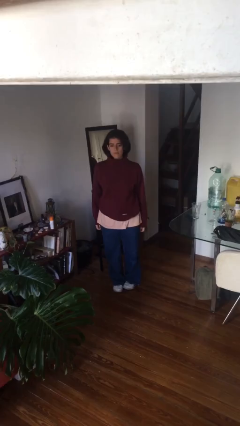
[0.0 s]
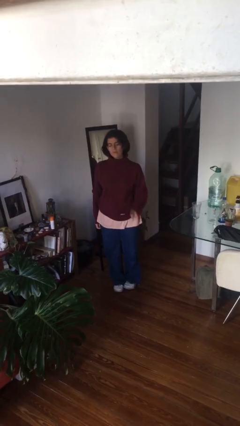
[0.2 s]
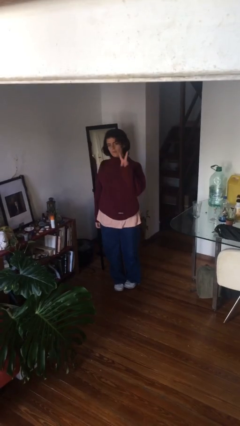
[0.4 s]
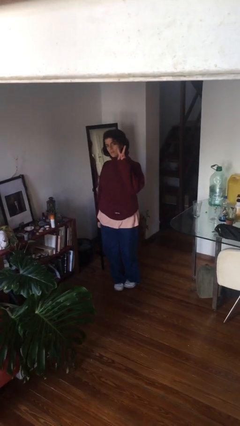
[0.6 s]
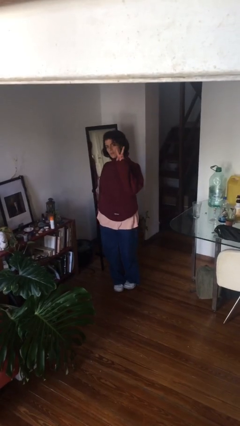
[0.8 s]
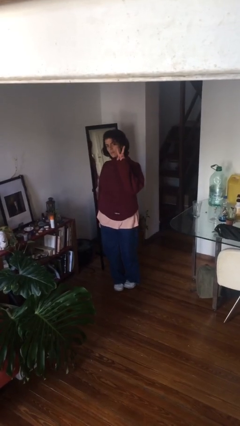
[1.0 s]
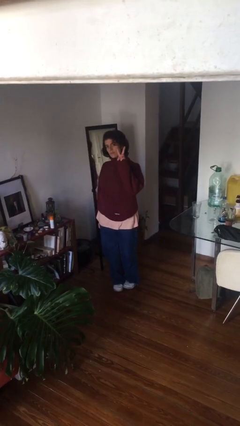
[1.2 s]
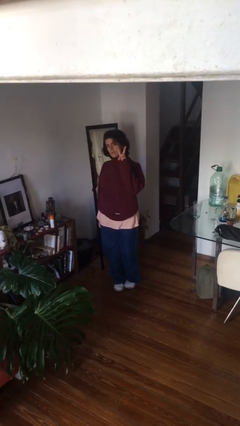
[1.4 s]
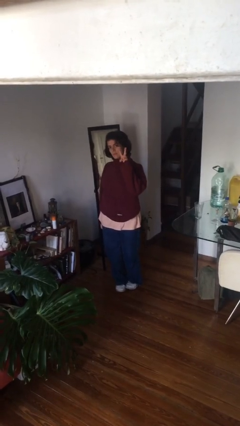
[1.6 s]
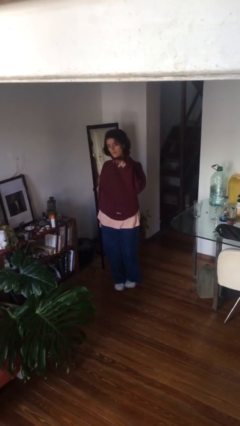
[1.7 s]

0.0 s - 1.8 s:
person gestures peace

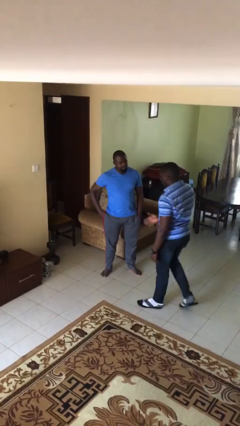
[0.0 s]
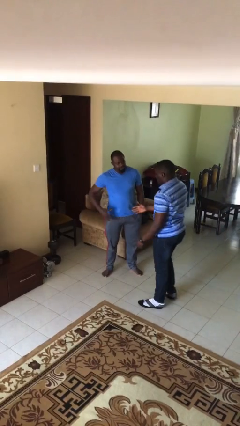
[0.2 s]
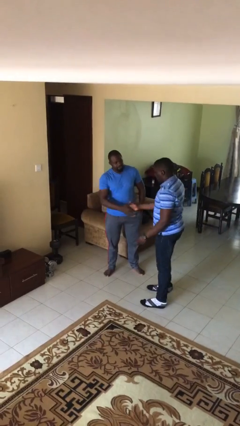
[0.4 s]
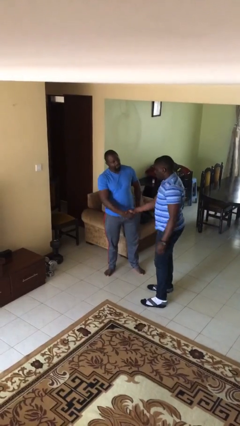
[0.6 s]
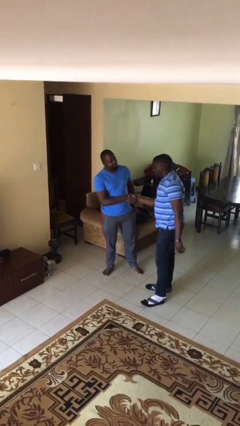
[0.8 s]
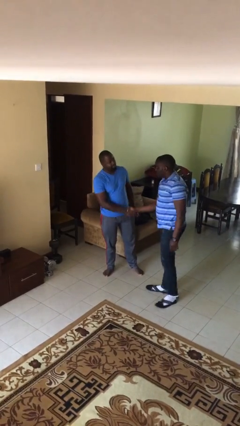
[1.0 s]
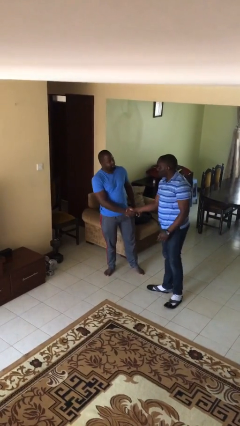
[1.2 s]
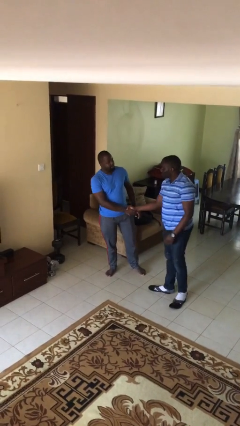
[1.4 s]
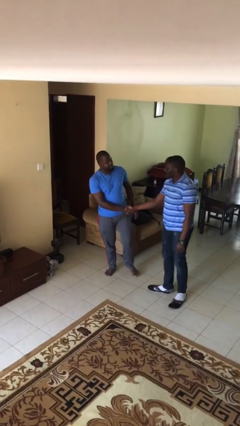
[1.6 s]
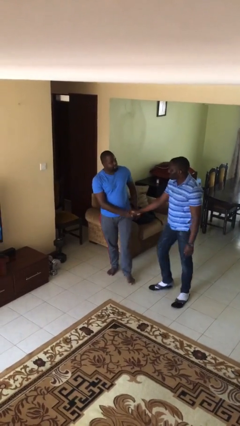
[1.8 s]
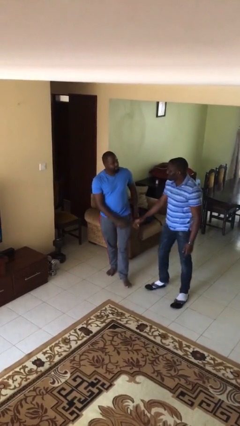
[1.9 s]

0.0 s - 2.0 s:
person shakes hand

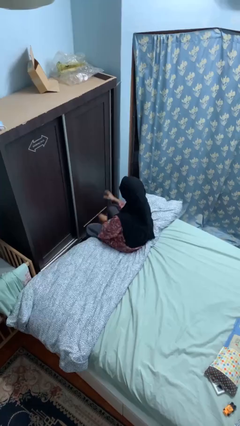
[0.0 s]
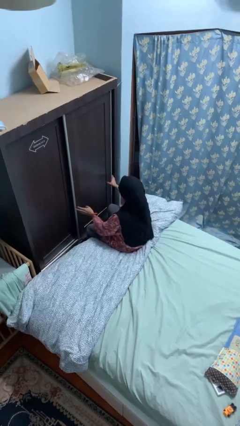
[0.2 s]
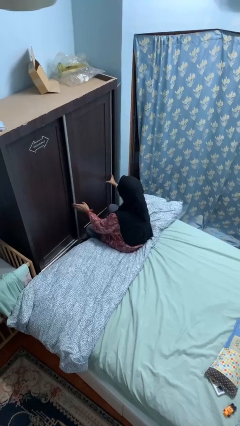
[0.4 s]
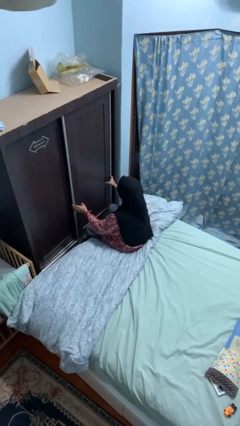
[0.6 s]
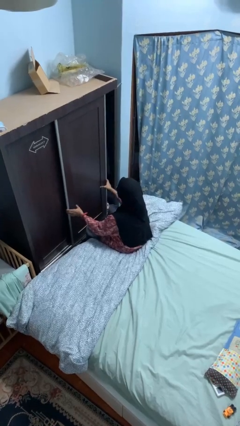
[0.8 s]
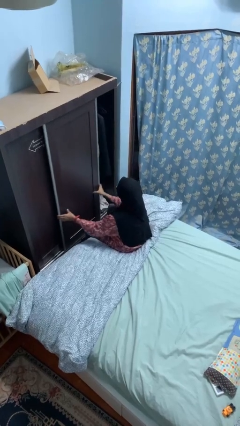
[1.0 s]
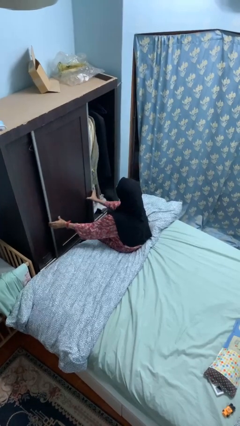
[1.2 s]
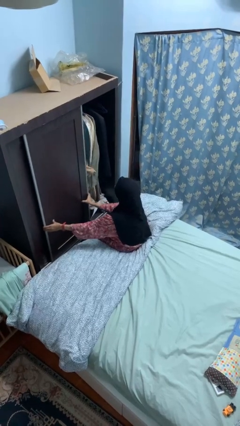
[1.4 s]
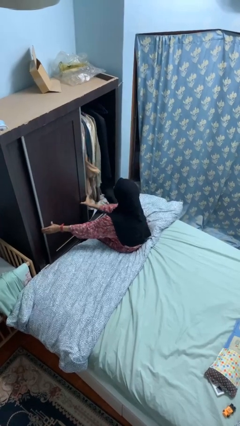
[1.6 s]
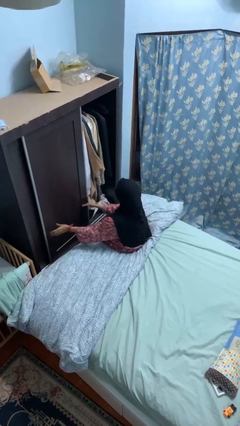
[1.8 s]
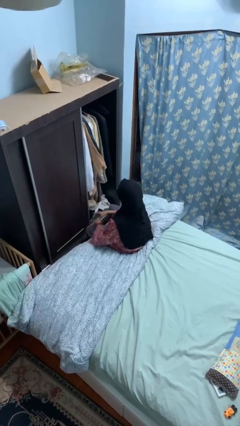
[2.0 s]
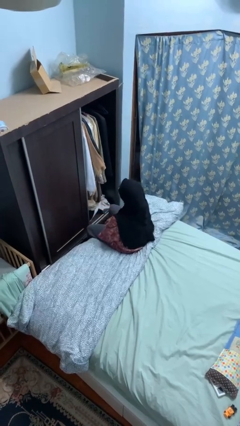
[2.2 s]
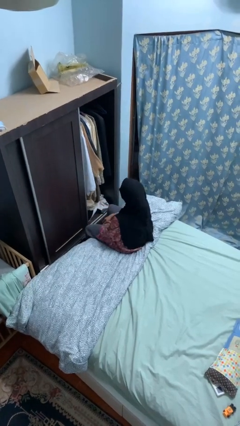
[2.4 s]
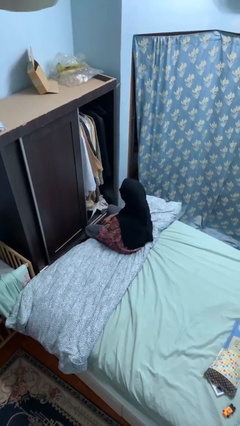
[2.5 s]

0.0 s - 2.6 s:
person opens closet door

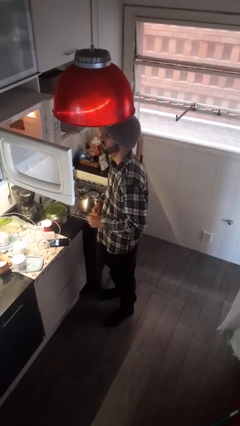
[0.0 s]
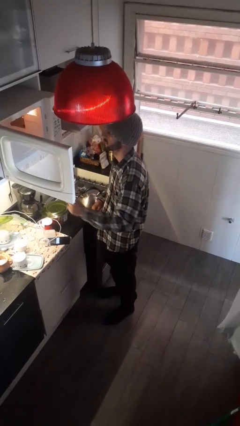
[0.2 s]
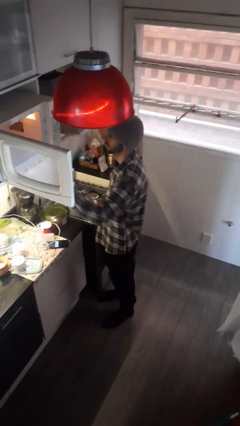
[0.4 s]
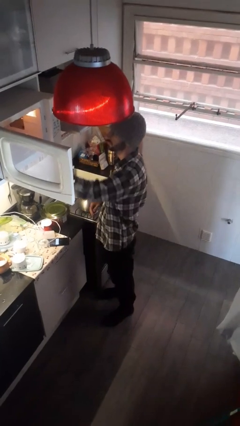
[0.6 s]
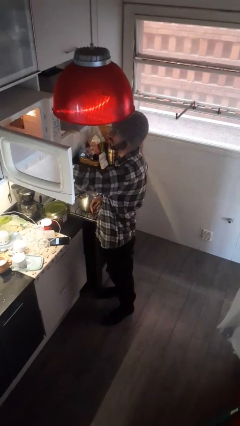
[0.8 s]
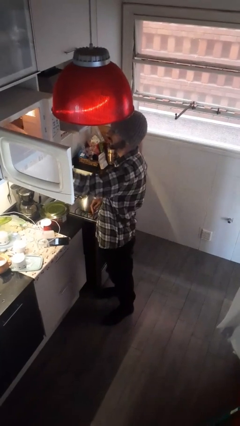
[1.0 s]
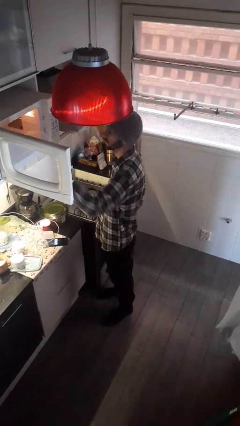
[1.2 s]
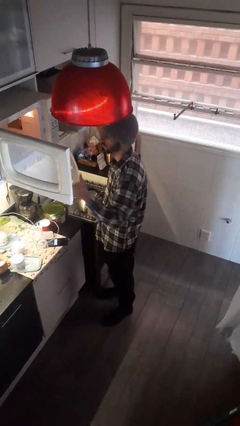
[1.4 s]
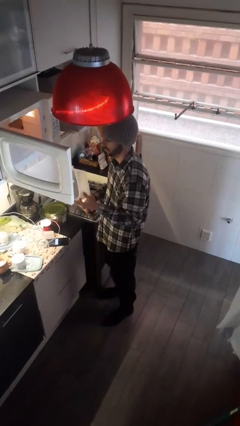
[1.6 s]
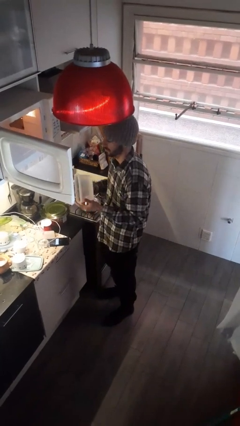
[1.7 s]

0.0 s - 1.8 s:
person takes object from microwave

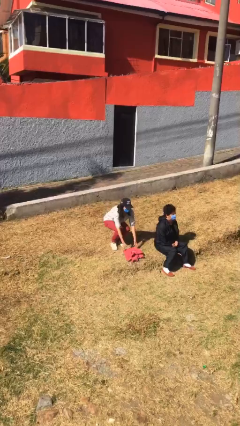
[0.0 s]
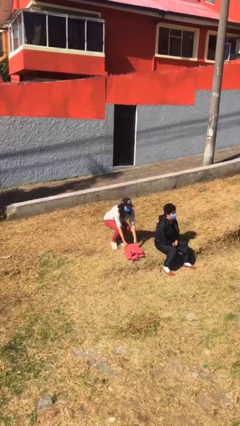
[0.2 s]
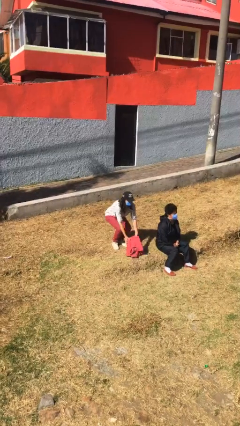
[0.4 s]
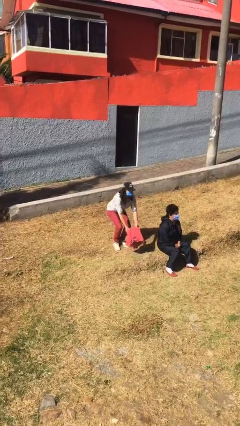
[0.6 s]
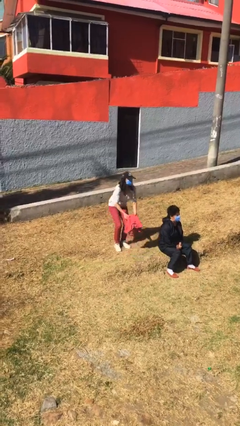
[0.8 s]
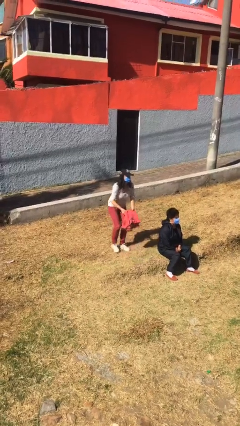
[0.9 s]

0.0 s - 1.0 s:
person steals object from person

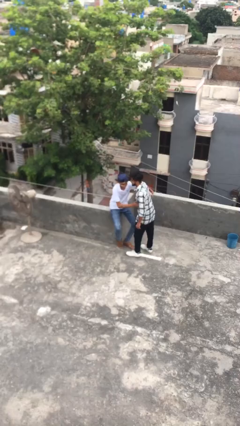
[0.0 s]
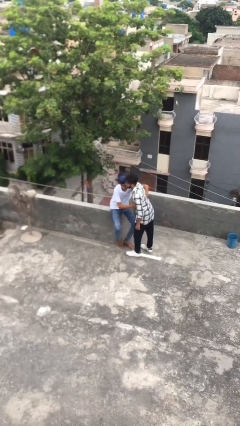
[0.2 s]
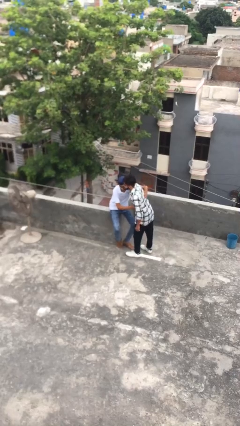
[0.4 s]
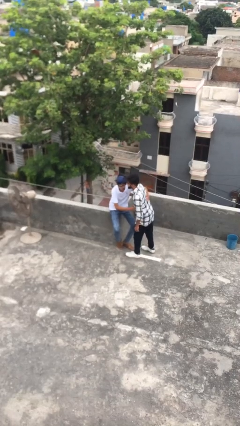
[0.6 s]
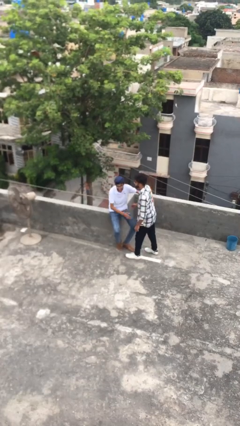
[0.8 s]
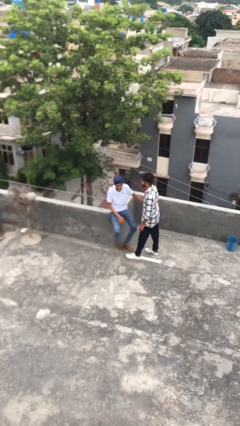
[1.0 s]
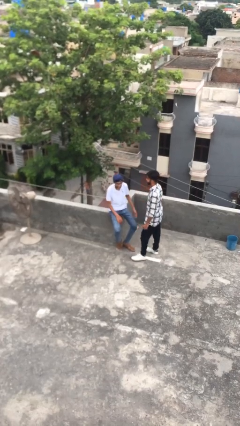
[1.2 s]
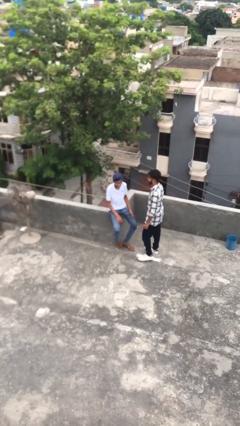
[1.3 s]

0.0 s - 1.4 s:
person embraces person

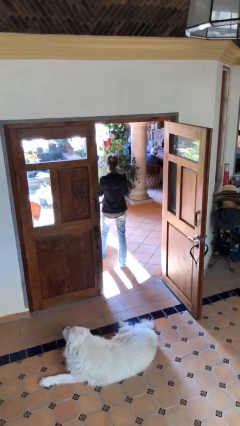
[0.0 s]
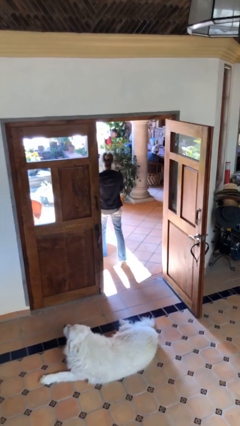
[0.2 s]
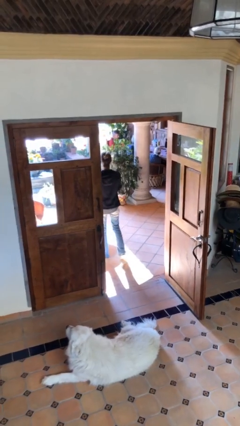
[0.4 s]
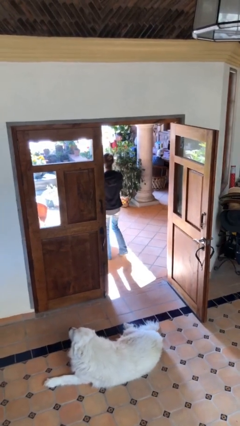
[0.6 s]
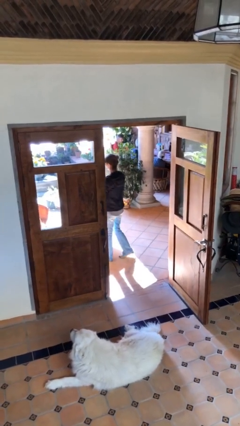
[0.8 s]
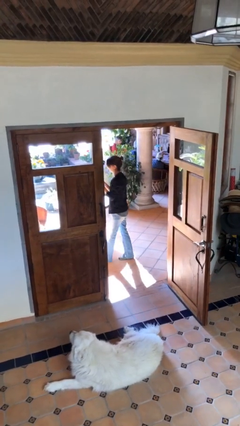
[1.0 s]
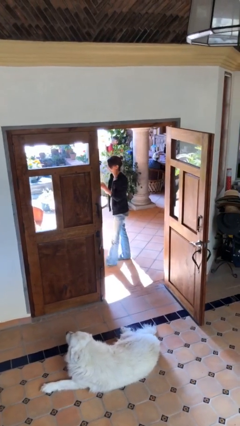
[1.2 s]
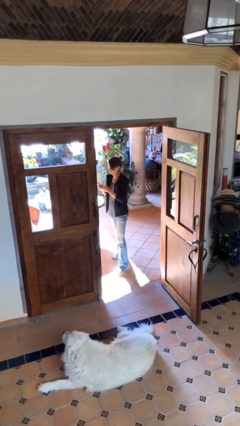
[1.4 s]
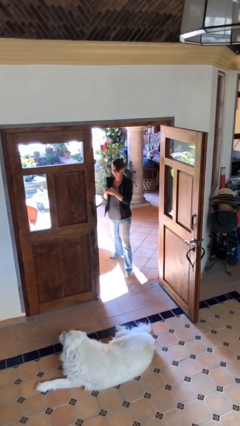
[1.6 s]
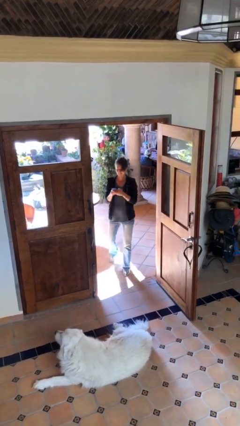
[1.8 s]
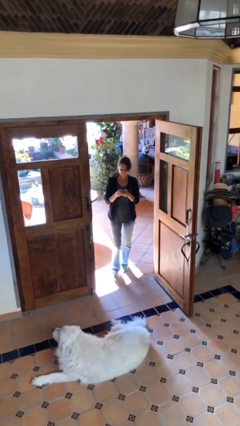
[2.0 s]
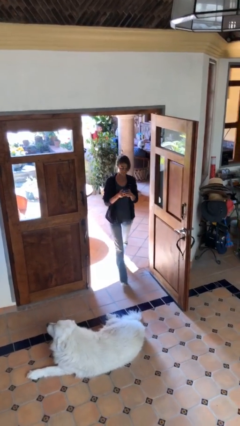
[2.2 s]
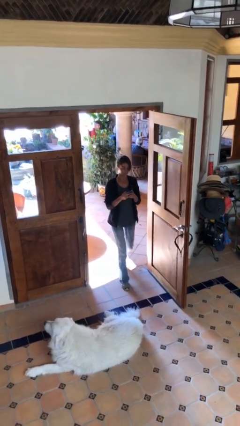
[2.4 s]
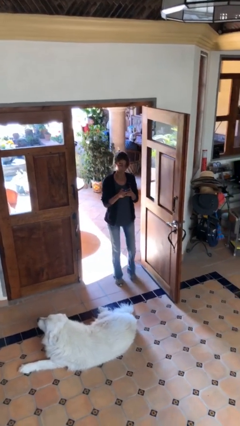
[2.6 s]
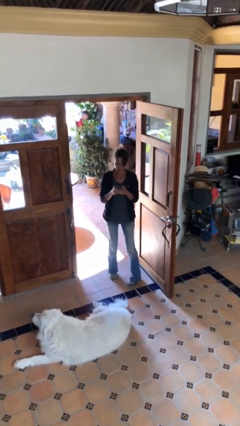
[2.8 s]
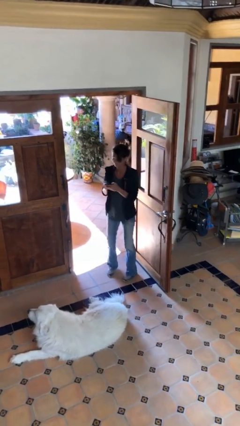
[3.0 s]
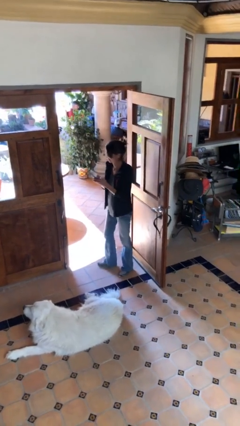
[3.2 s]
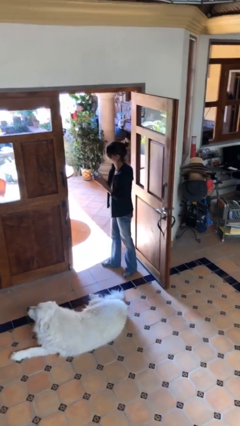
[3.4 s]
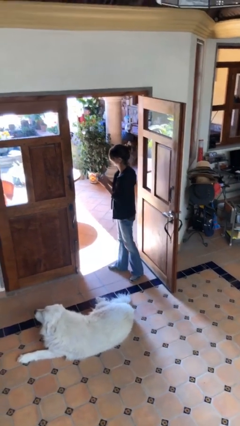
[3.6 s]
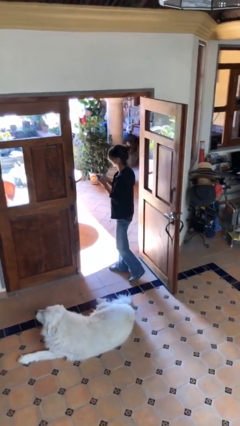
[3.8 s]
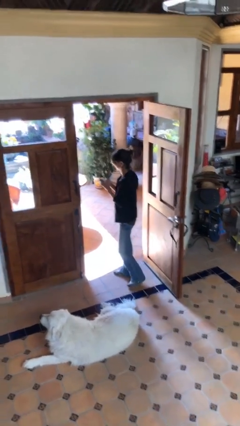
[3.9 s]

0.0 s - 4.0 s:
person enters scene through structure

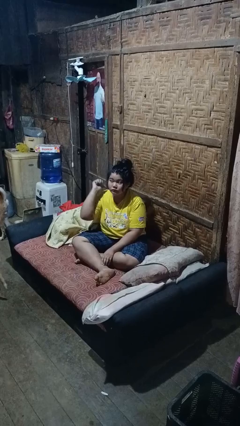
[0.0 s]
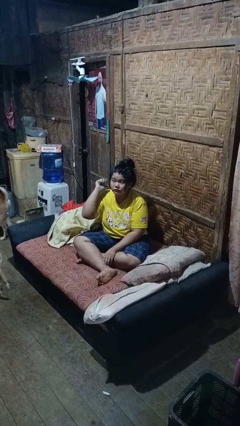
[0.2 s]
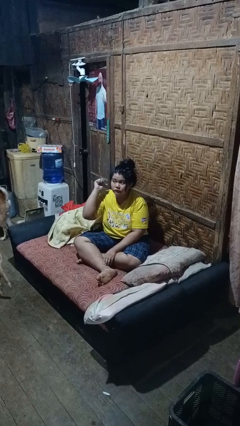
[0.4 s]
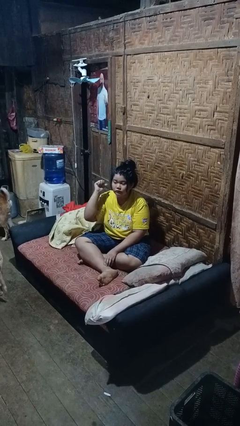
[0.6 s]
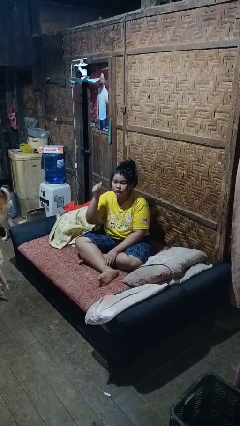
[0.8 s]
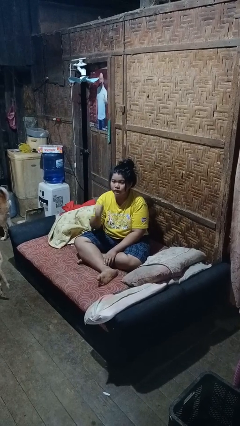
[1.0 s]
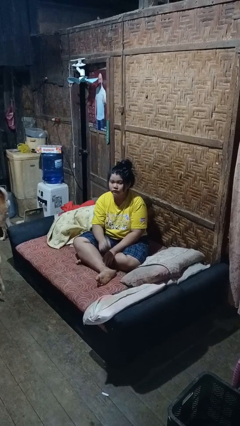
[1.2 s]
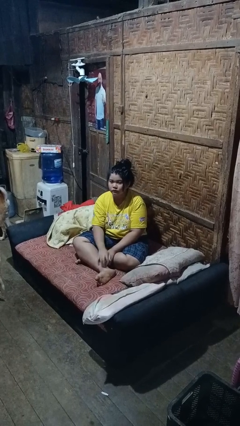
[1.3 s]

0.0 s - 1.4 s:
person gestures behind me

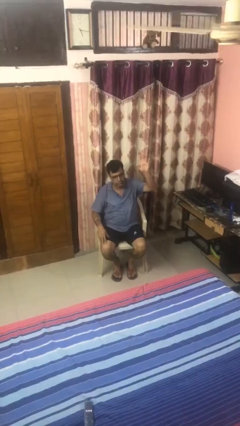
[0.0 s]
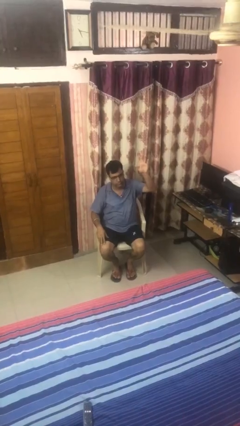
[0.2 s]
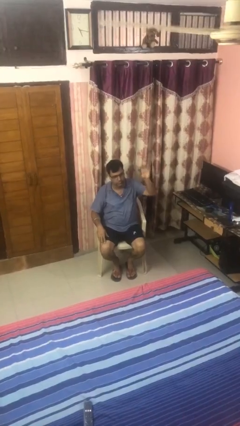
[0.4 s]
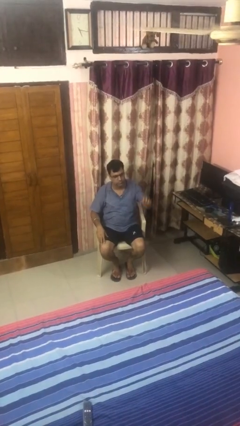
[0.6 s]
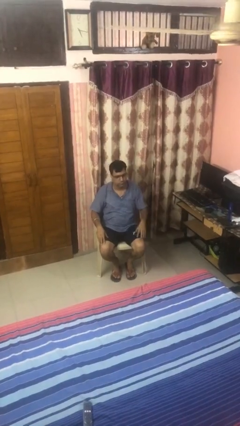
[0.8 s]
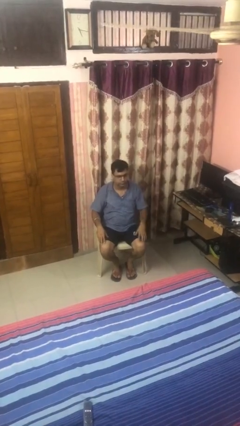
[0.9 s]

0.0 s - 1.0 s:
person gestures lower hand
